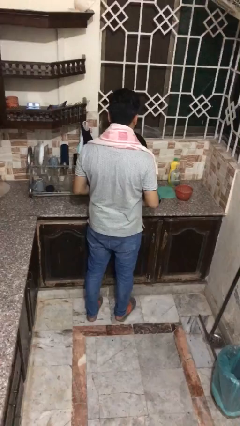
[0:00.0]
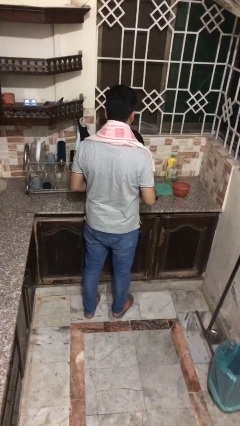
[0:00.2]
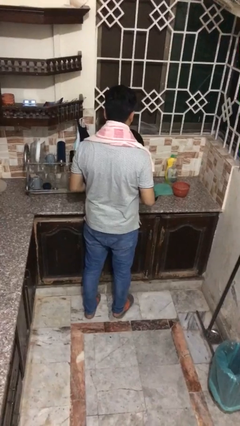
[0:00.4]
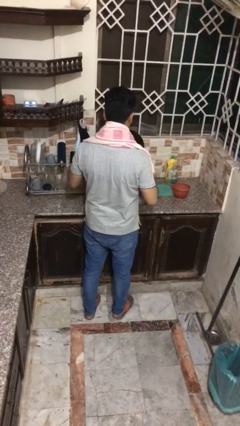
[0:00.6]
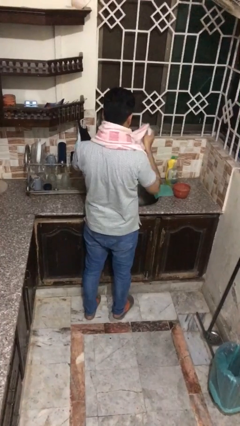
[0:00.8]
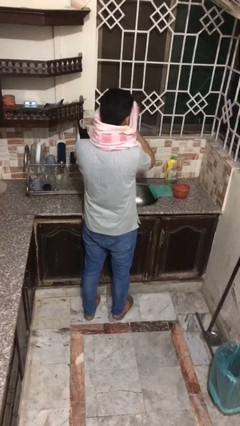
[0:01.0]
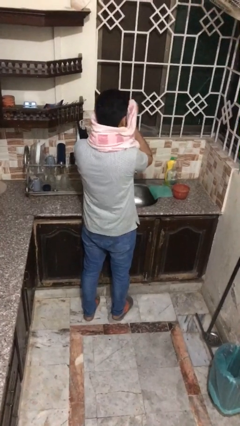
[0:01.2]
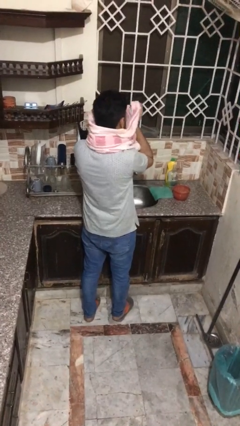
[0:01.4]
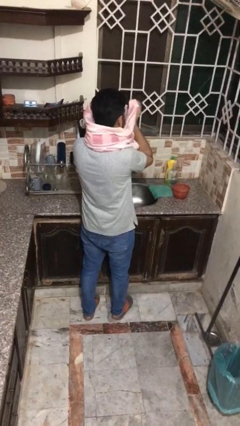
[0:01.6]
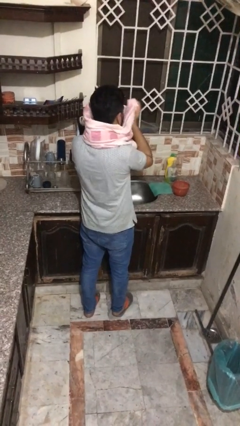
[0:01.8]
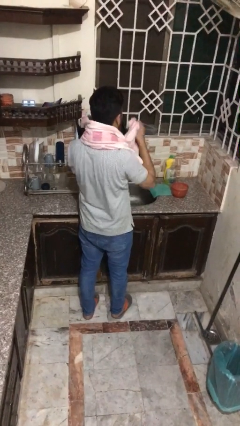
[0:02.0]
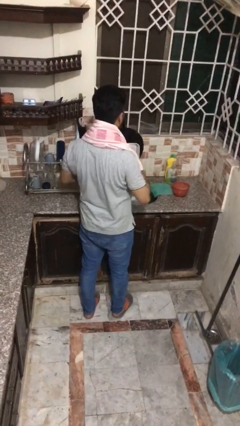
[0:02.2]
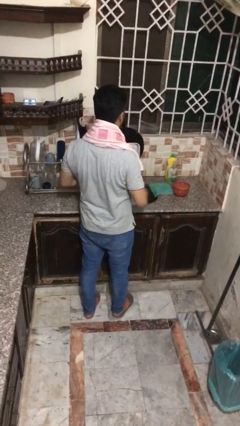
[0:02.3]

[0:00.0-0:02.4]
person dries face with towel

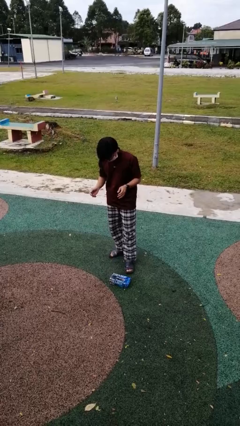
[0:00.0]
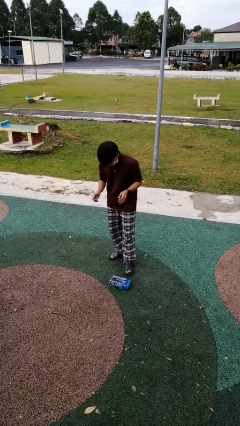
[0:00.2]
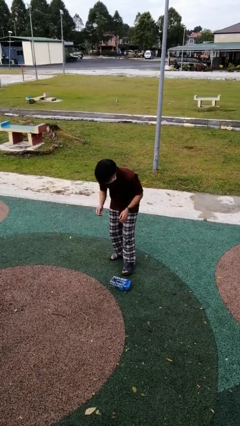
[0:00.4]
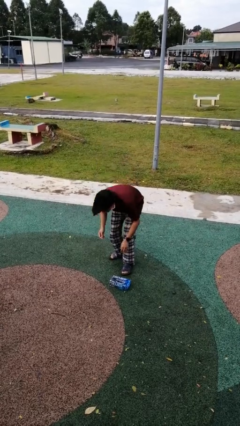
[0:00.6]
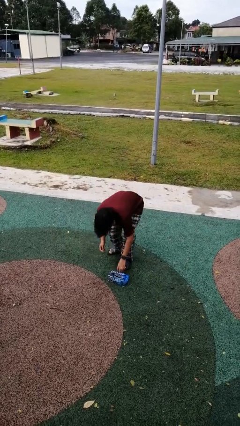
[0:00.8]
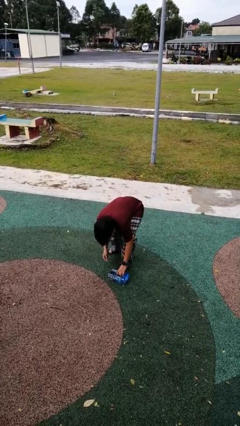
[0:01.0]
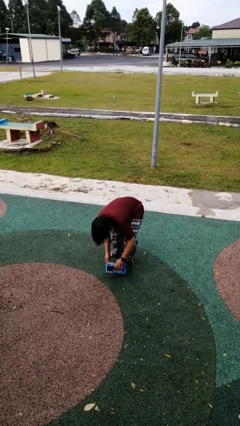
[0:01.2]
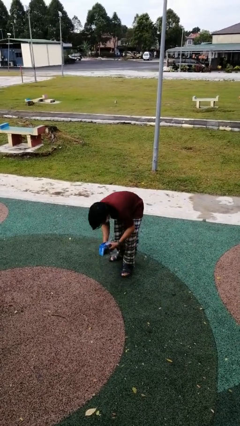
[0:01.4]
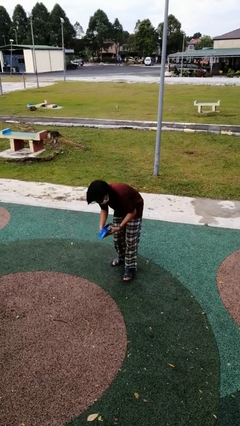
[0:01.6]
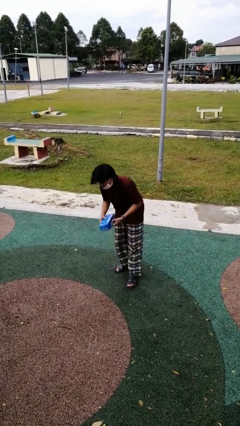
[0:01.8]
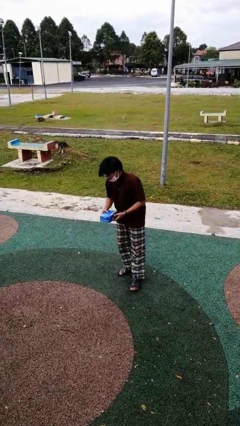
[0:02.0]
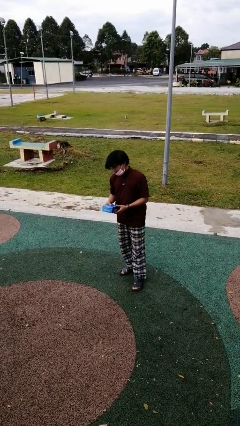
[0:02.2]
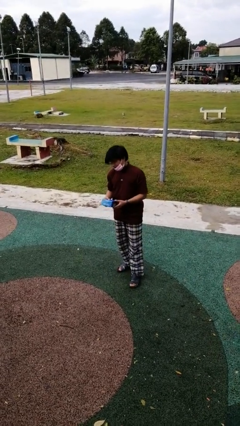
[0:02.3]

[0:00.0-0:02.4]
person picks up object from floor

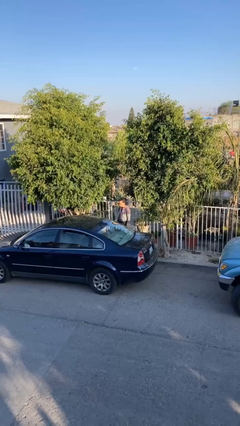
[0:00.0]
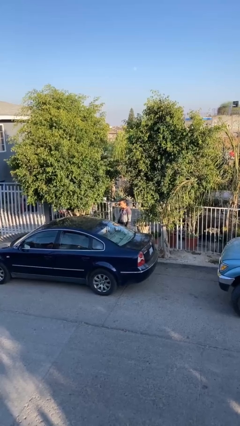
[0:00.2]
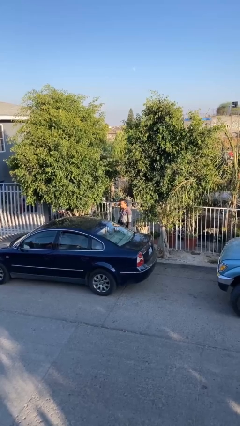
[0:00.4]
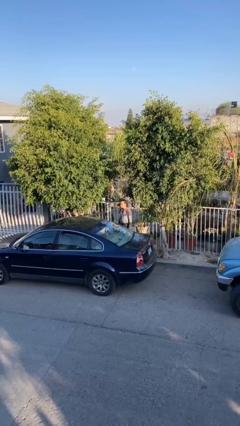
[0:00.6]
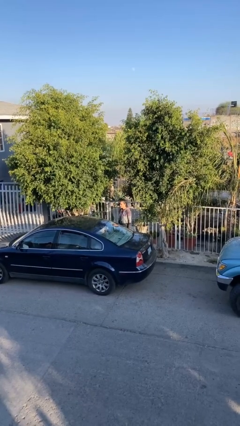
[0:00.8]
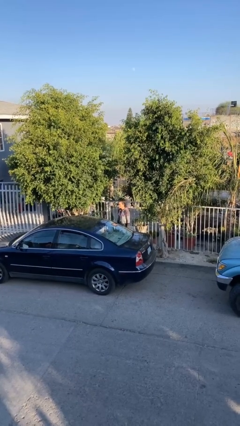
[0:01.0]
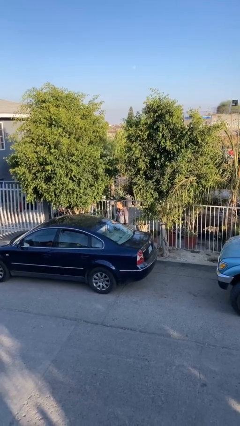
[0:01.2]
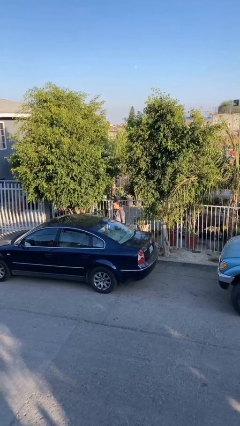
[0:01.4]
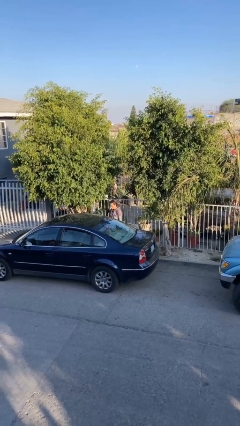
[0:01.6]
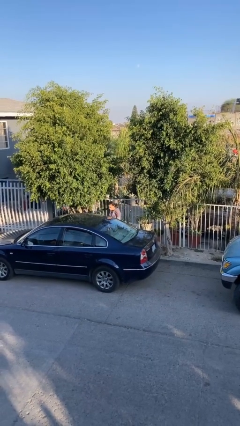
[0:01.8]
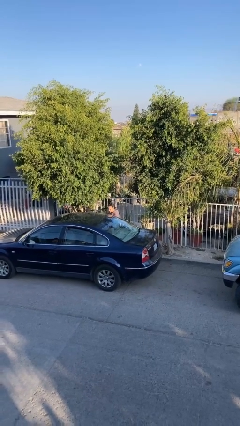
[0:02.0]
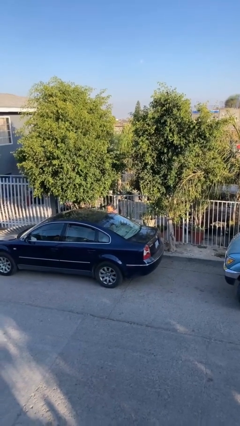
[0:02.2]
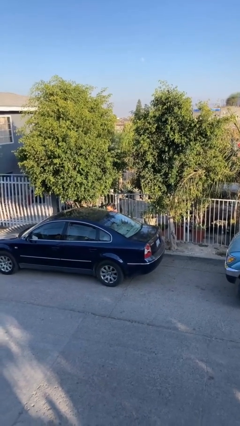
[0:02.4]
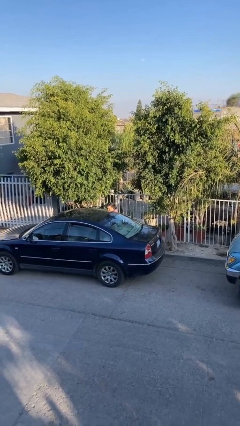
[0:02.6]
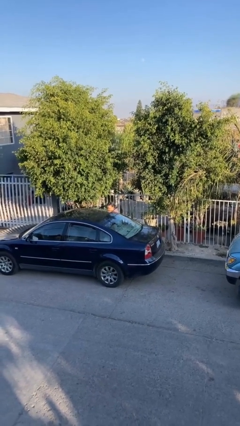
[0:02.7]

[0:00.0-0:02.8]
person unloads car

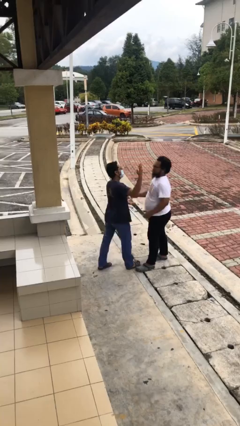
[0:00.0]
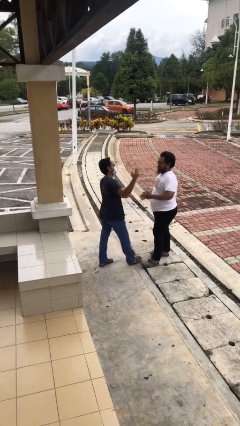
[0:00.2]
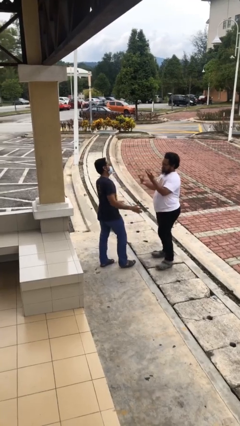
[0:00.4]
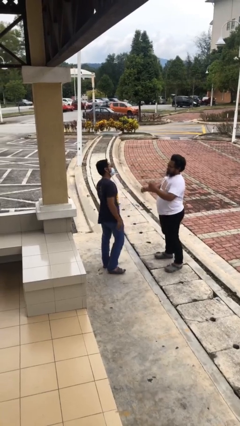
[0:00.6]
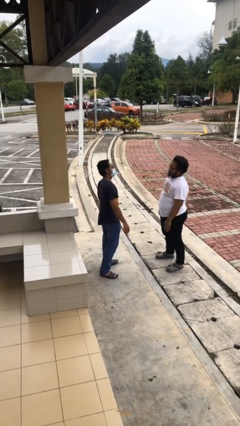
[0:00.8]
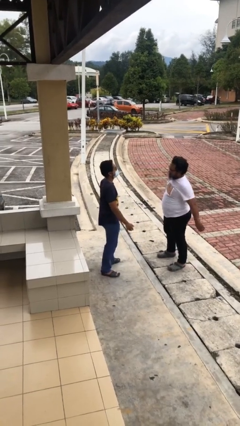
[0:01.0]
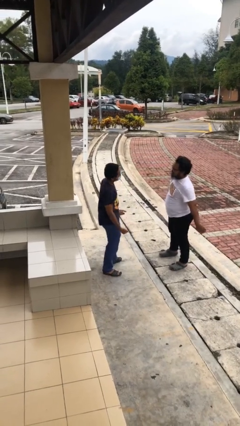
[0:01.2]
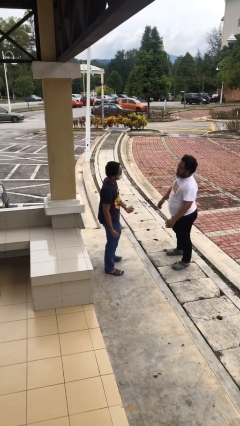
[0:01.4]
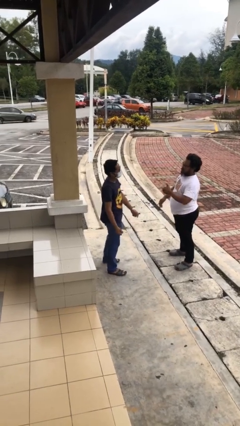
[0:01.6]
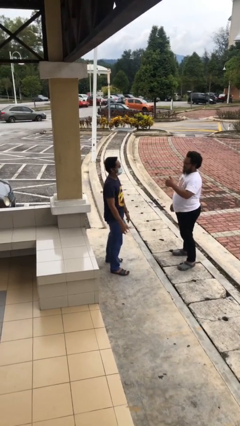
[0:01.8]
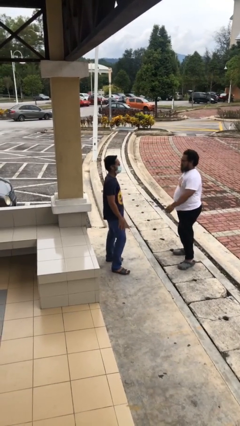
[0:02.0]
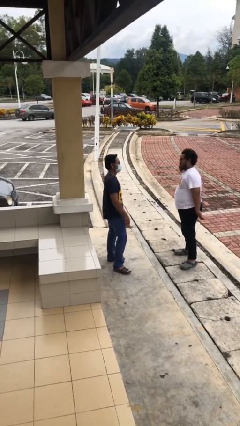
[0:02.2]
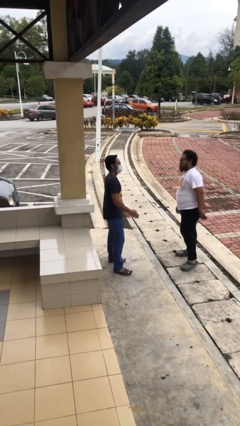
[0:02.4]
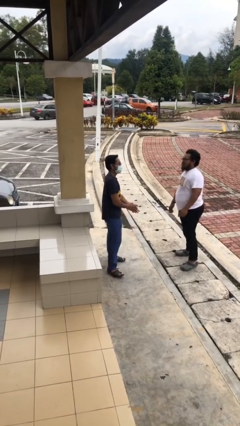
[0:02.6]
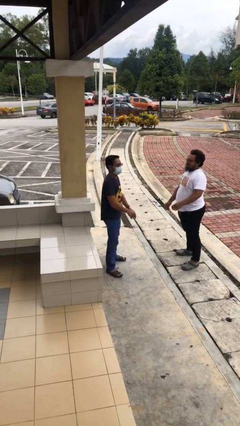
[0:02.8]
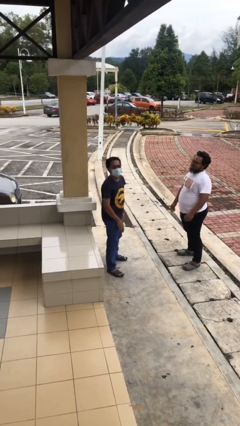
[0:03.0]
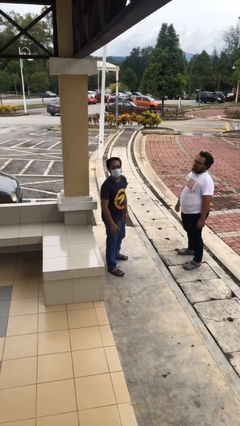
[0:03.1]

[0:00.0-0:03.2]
person talks to person

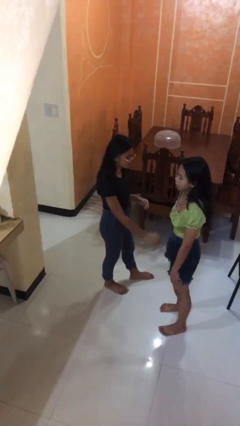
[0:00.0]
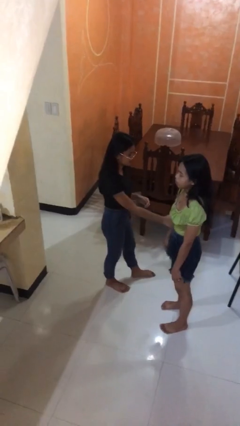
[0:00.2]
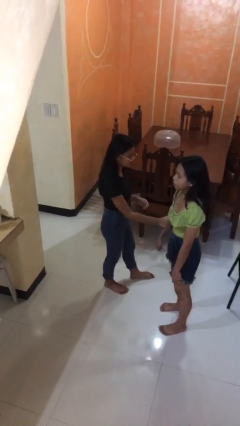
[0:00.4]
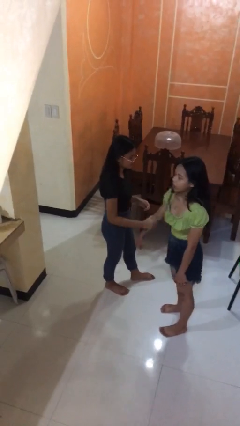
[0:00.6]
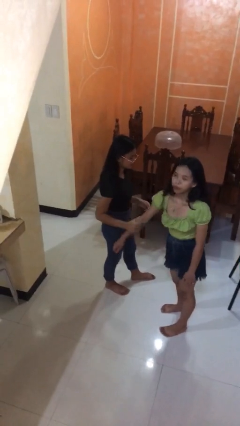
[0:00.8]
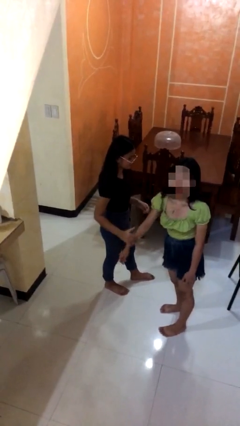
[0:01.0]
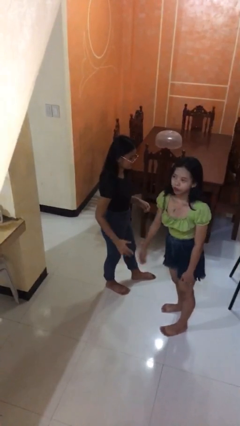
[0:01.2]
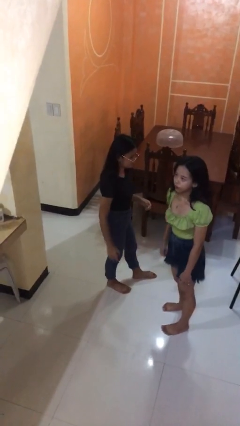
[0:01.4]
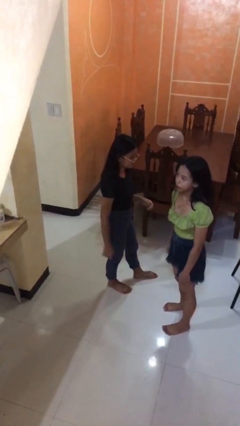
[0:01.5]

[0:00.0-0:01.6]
person grabs person by forearm

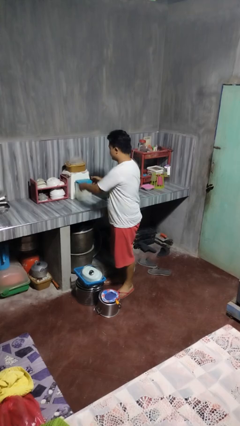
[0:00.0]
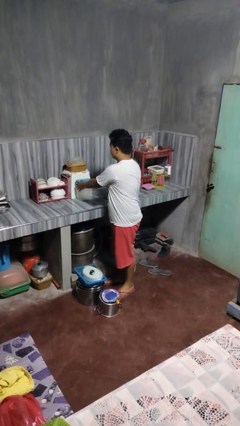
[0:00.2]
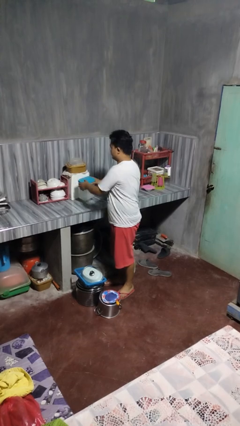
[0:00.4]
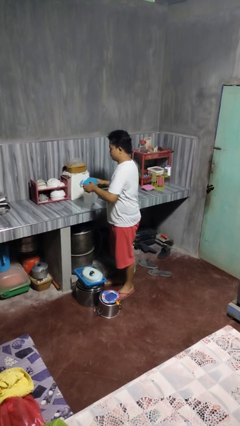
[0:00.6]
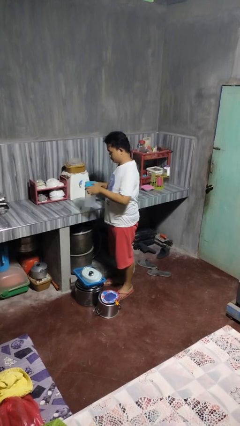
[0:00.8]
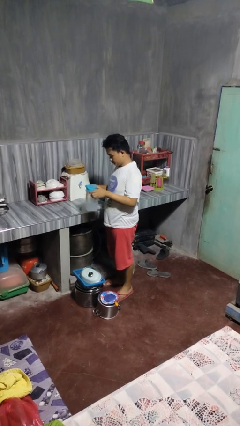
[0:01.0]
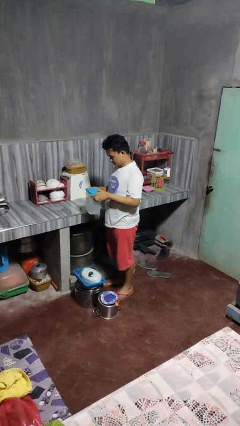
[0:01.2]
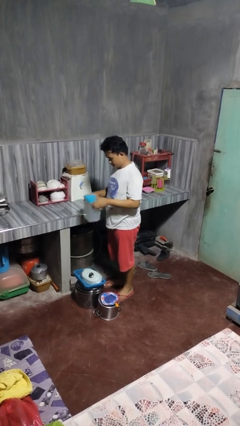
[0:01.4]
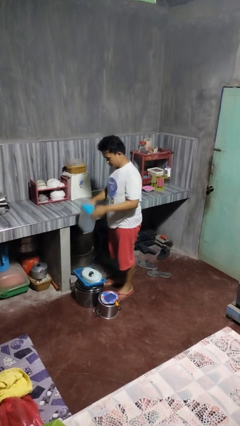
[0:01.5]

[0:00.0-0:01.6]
person picks up object from countertop

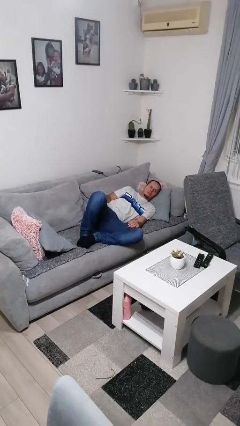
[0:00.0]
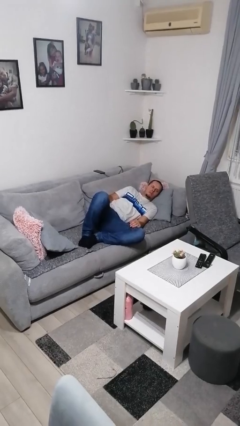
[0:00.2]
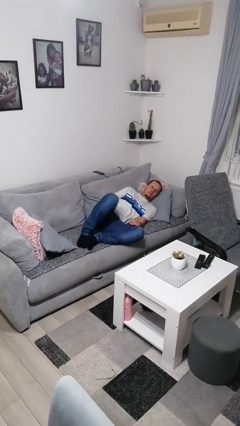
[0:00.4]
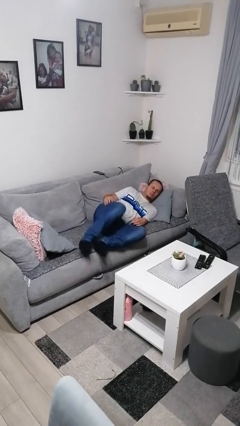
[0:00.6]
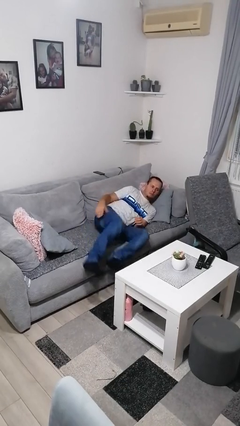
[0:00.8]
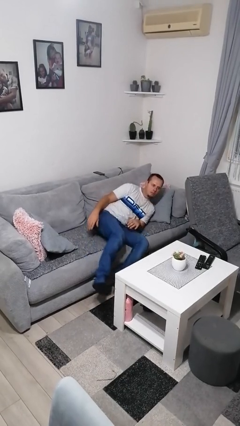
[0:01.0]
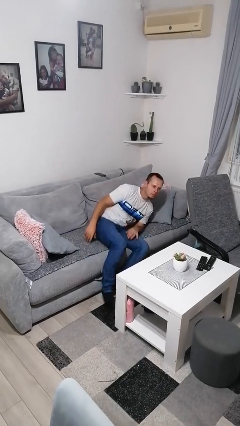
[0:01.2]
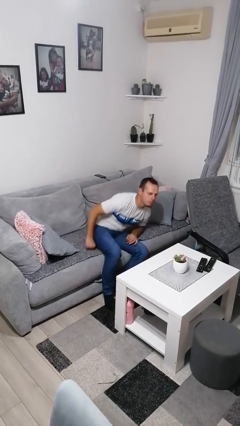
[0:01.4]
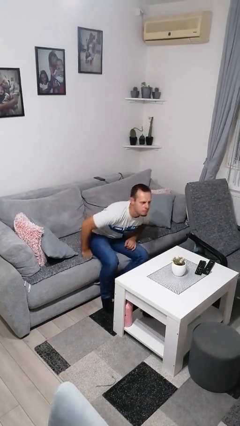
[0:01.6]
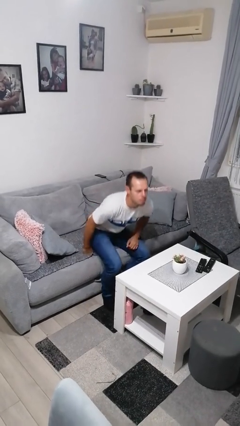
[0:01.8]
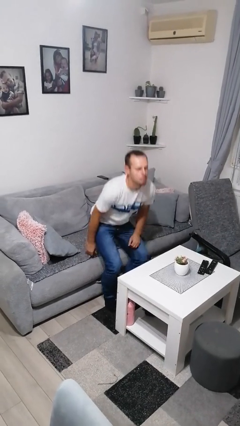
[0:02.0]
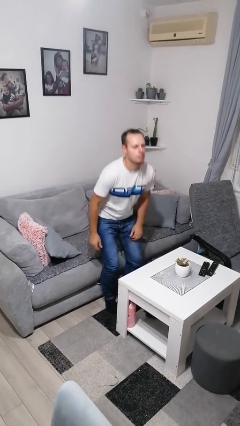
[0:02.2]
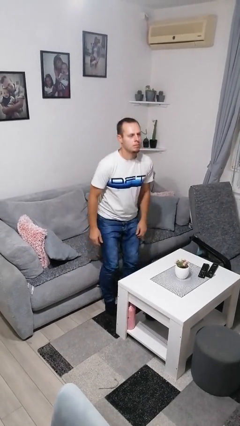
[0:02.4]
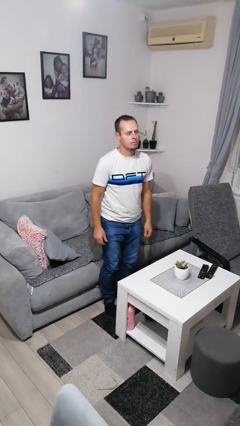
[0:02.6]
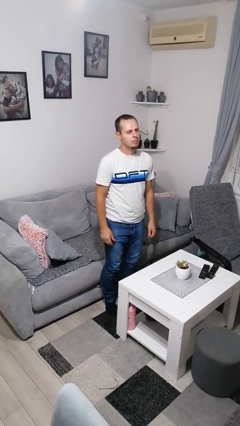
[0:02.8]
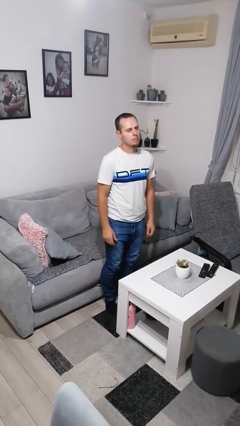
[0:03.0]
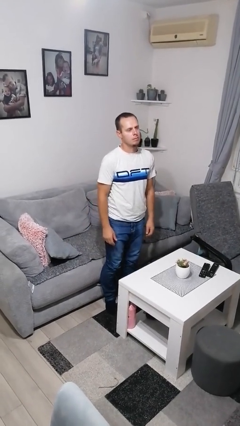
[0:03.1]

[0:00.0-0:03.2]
person stands up
